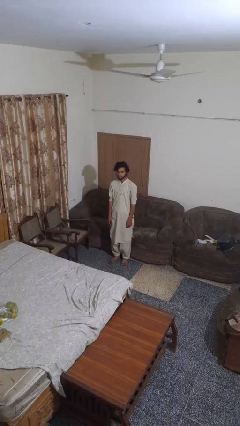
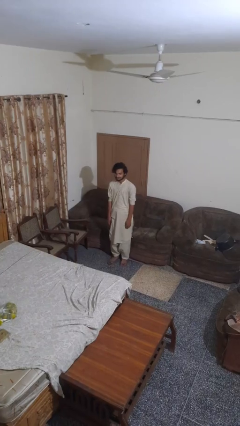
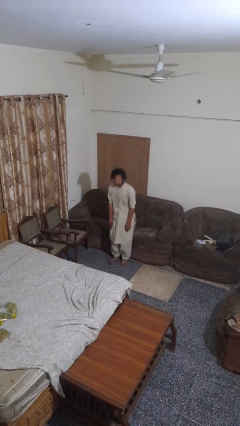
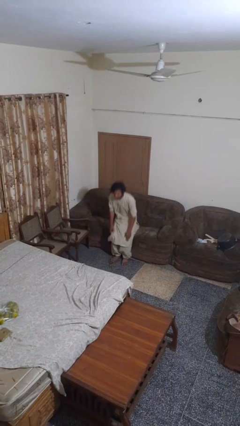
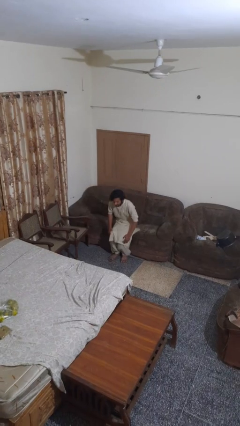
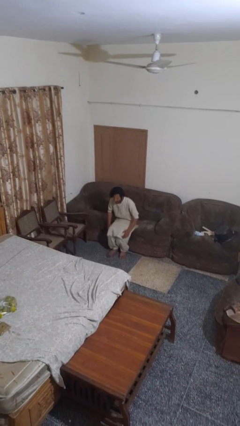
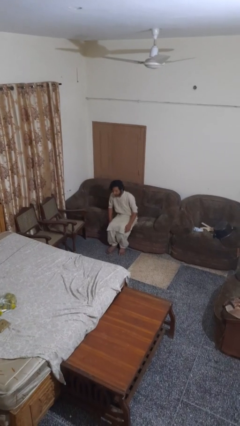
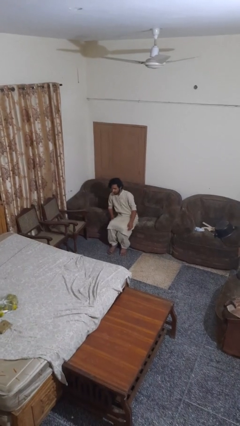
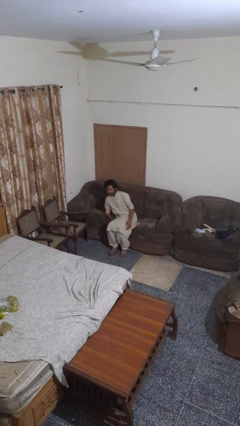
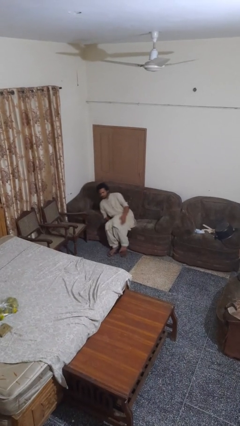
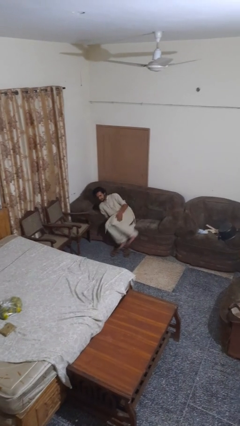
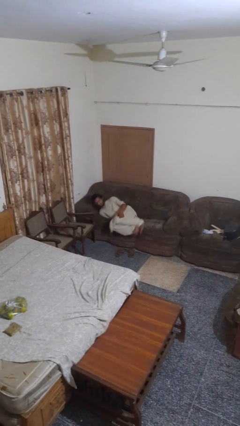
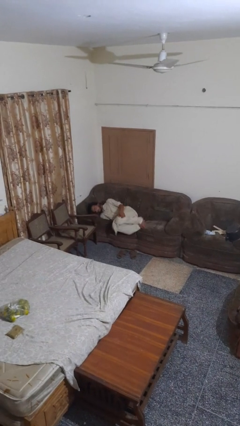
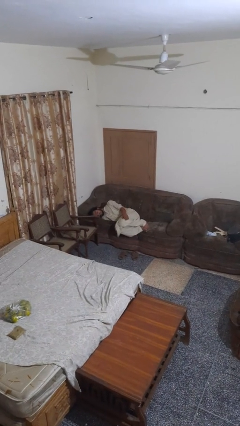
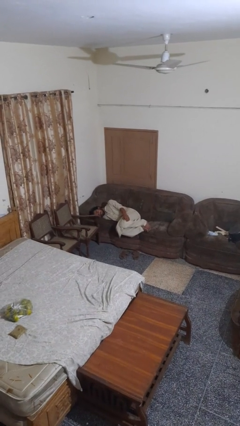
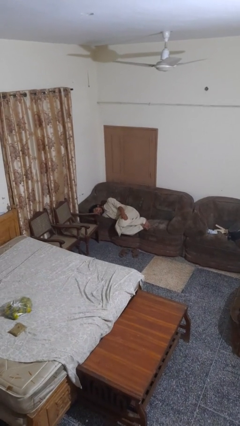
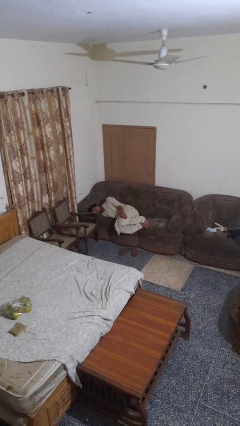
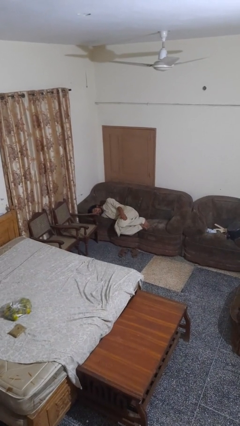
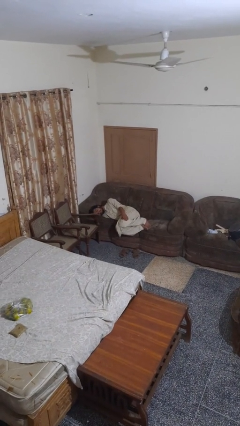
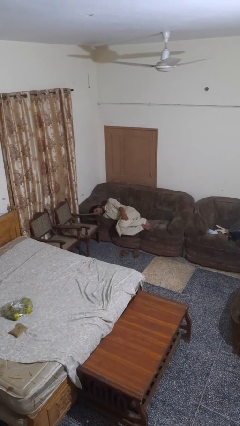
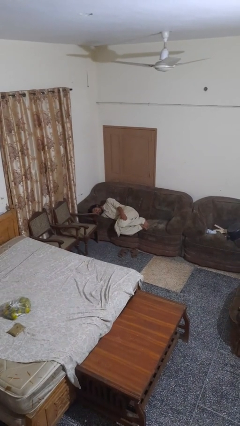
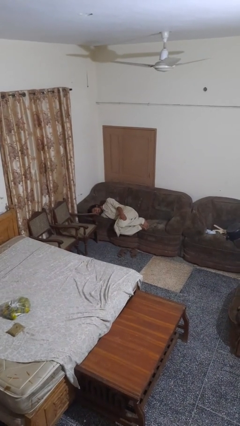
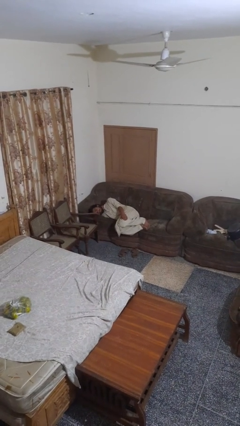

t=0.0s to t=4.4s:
person lies down on couch

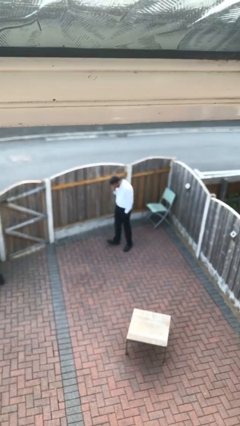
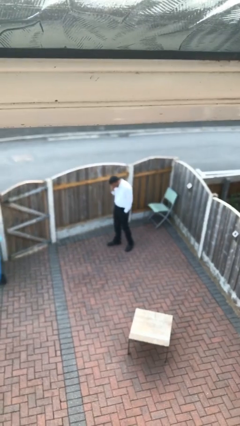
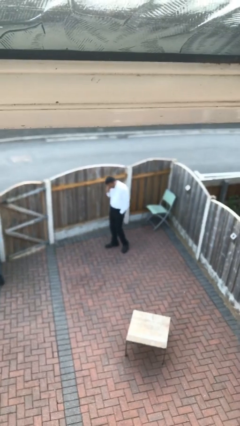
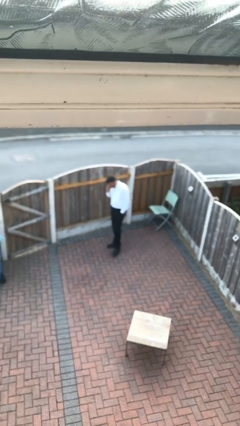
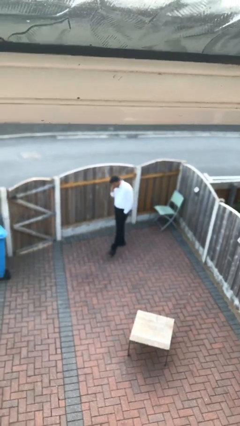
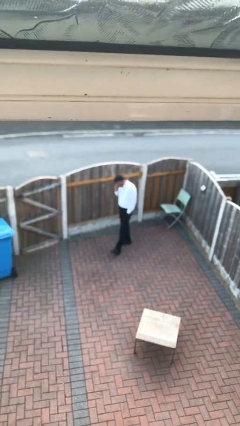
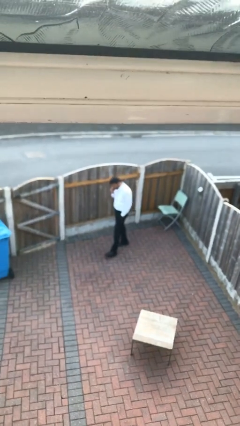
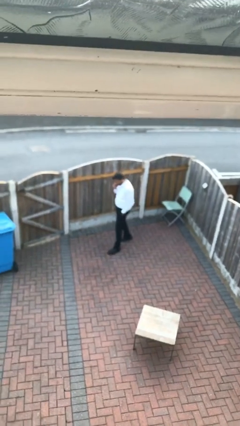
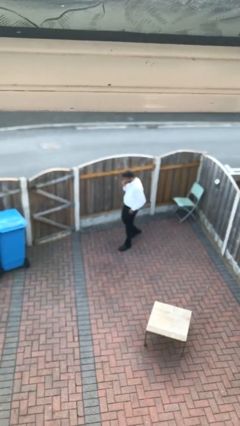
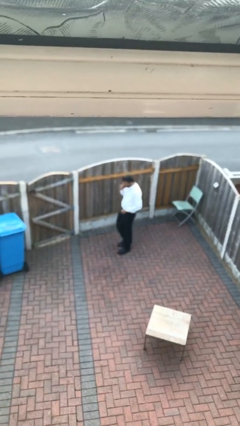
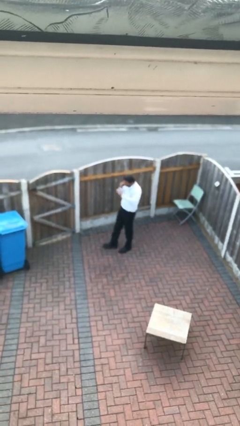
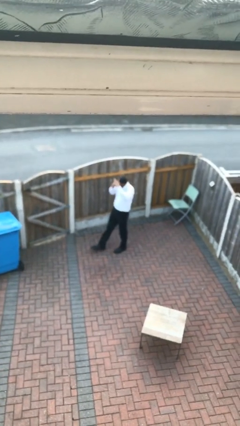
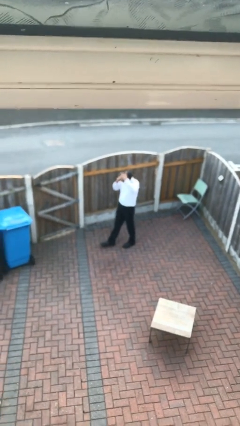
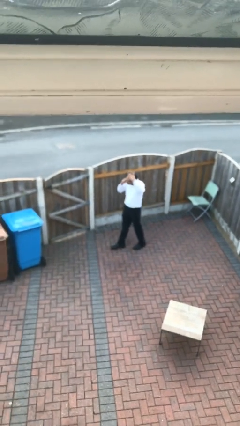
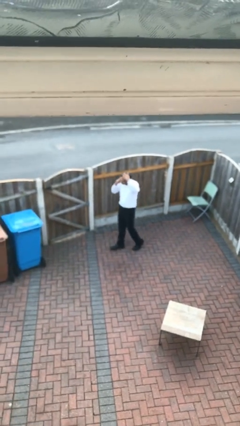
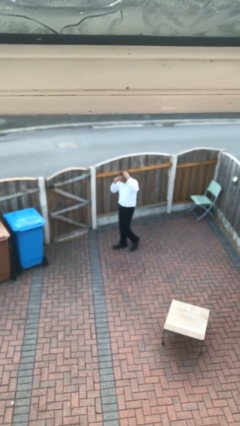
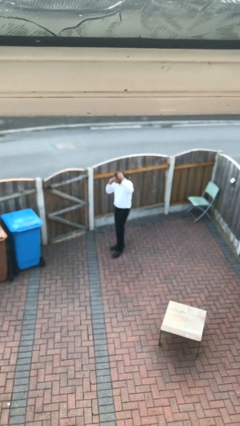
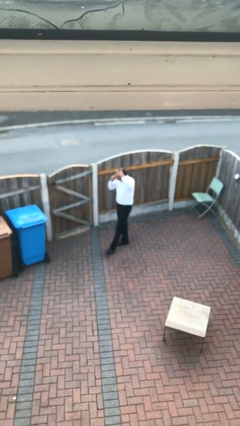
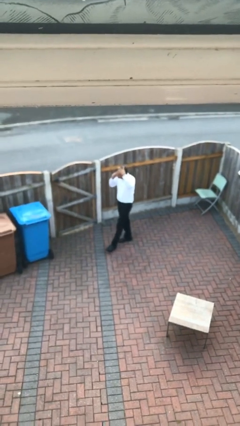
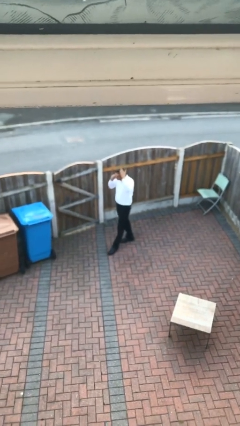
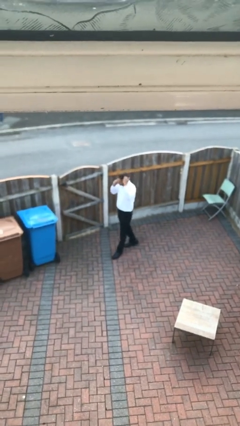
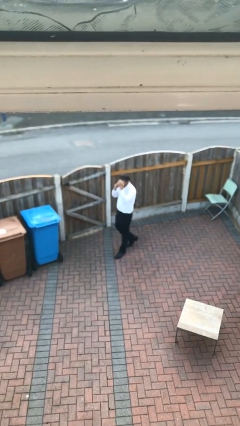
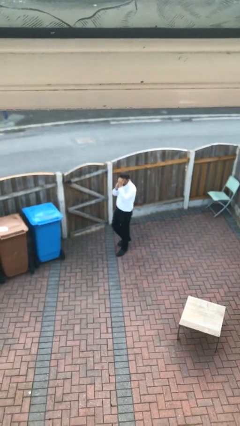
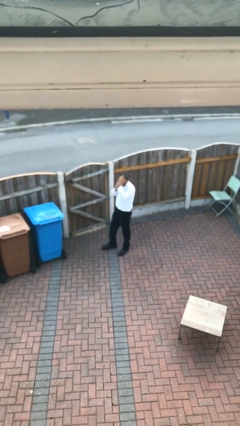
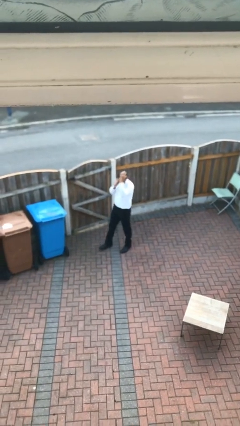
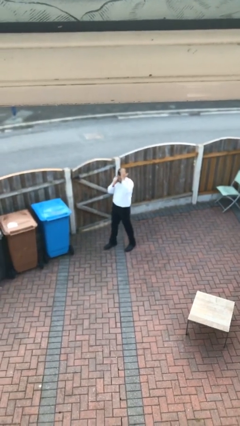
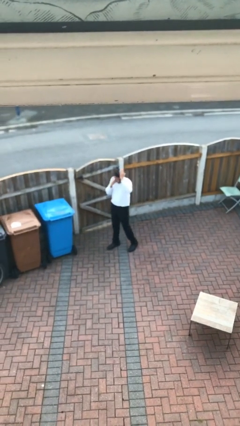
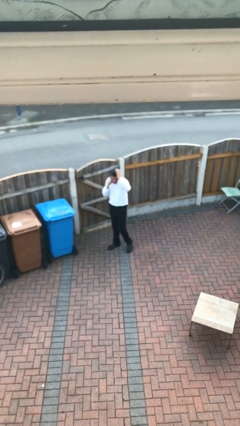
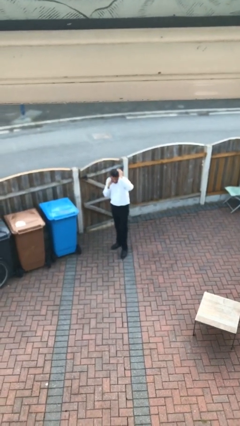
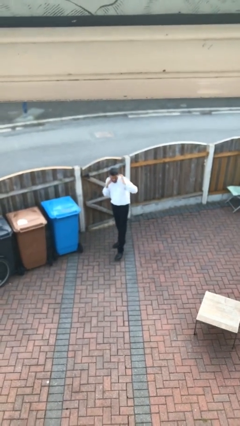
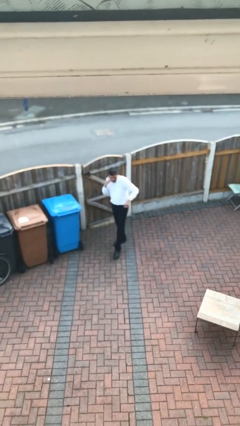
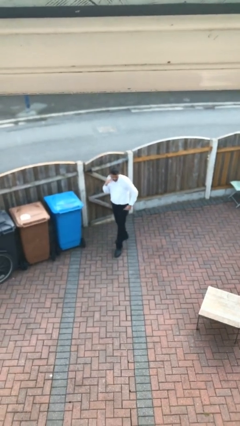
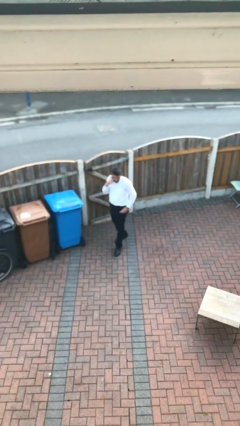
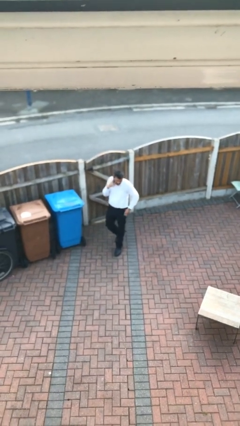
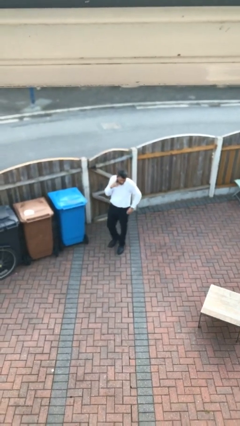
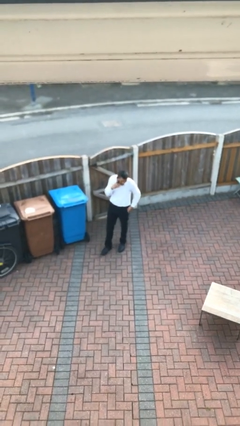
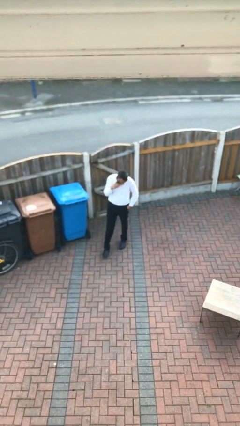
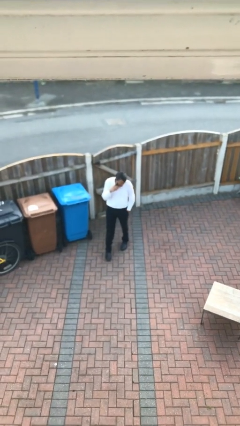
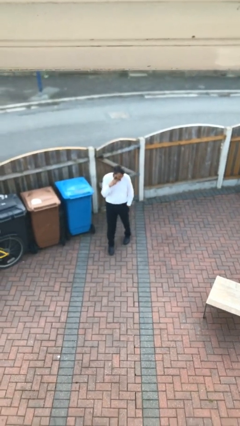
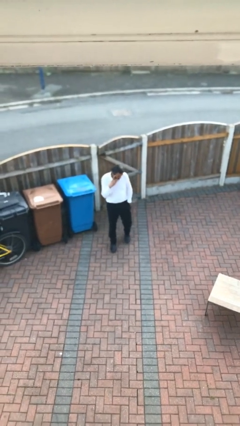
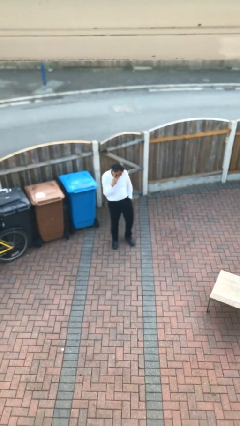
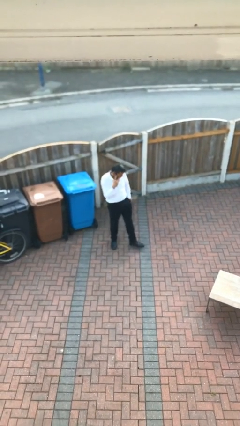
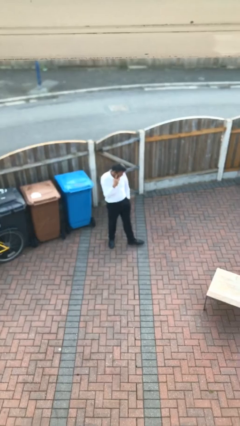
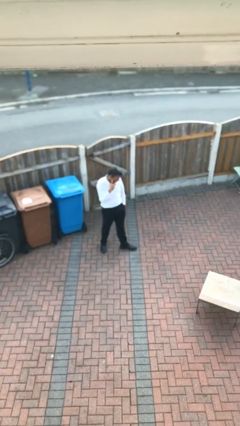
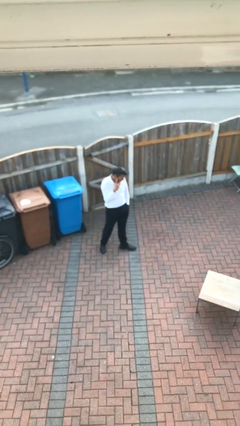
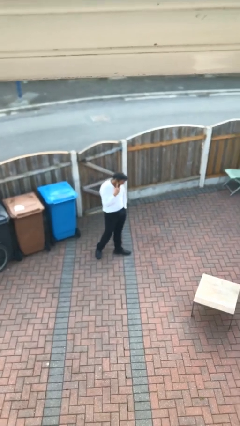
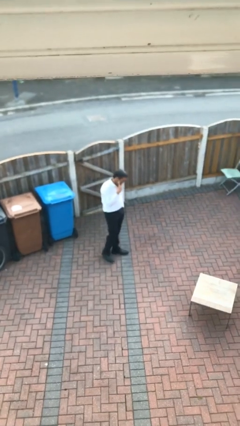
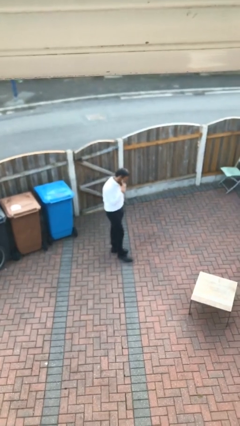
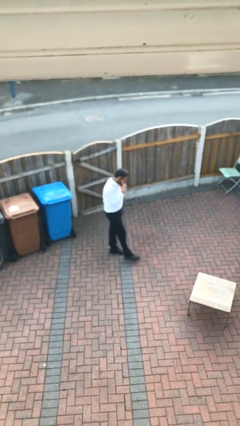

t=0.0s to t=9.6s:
person talks on phone

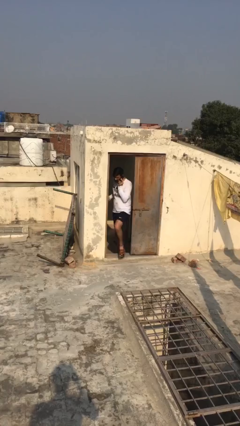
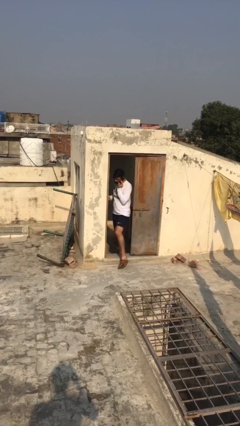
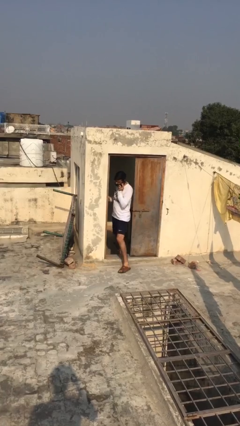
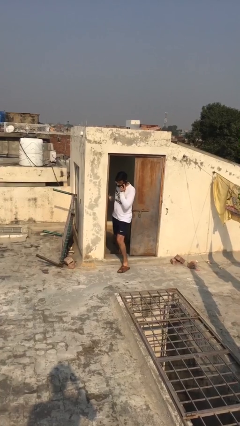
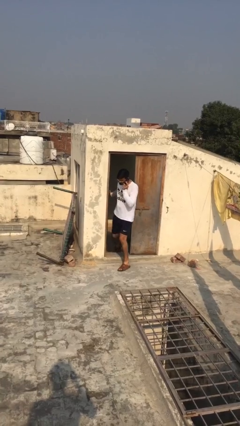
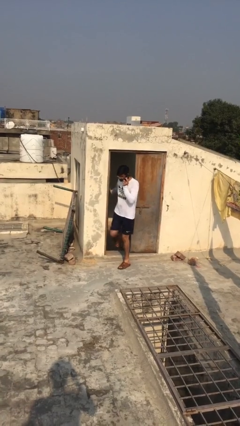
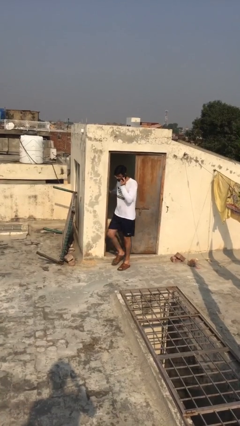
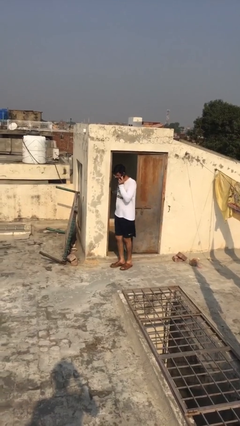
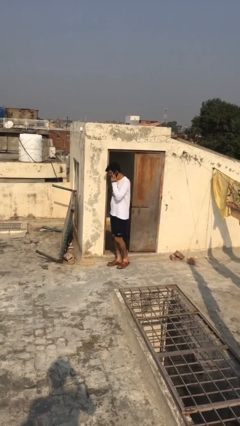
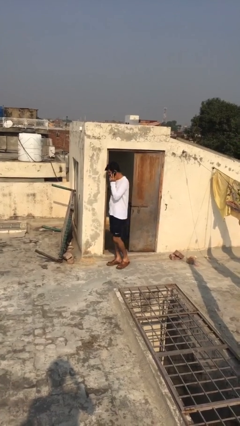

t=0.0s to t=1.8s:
person enters scene through structure

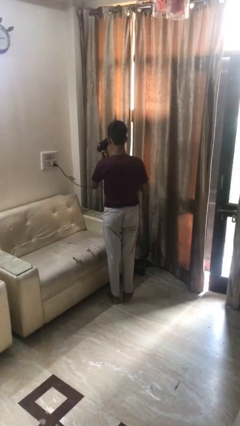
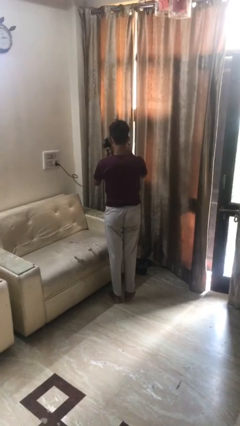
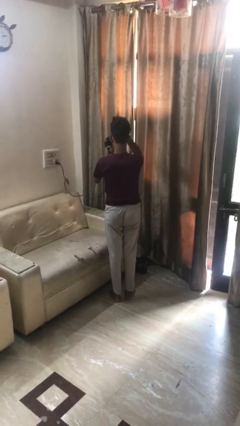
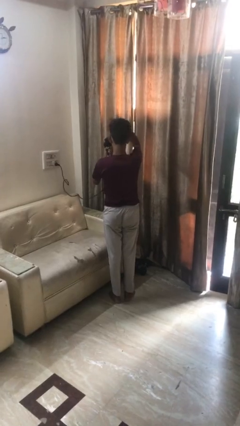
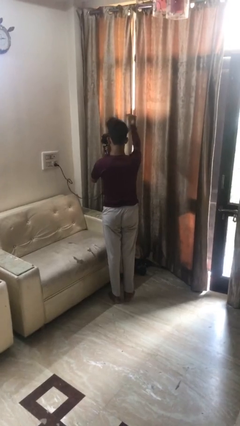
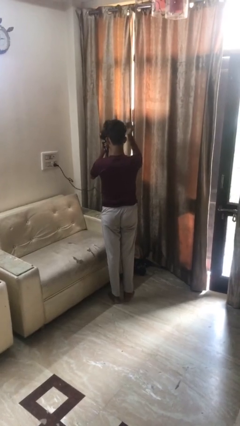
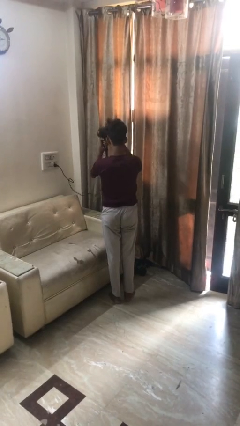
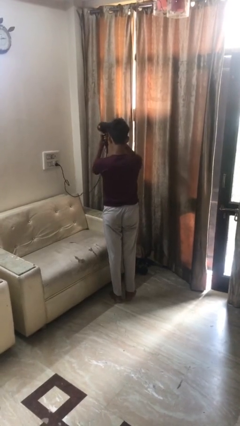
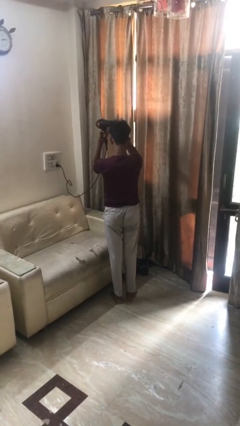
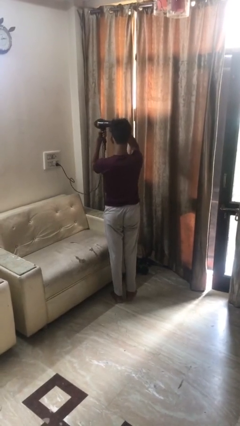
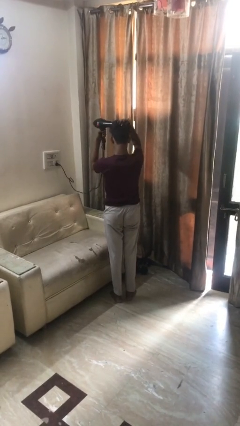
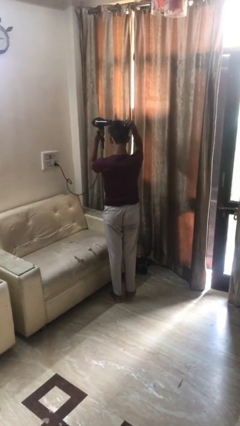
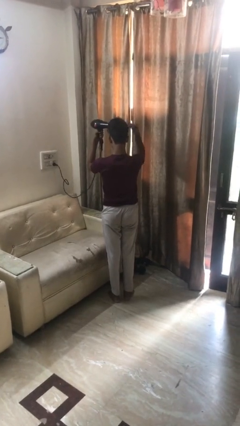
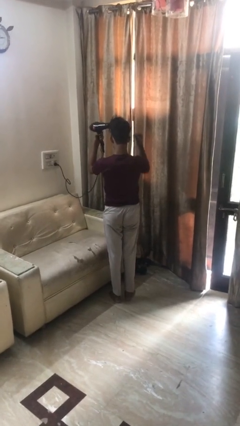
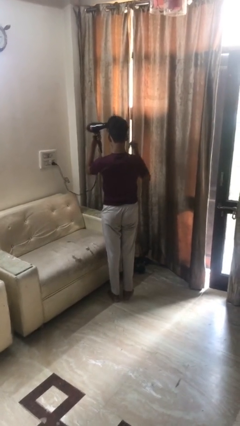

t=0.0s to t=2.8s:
person dries hair with hairdryer
